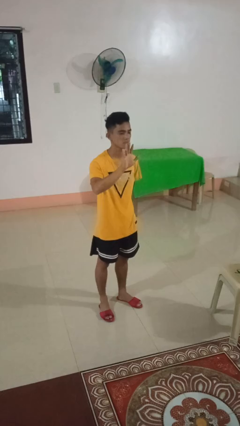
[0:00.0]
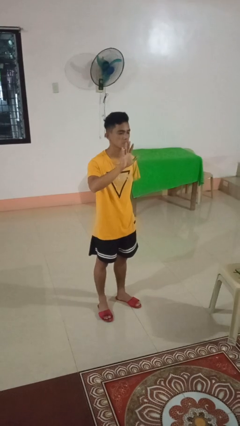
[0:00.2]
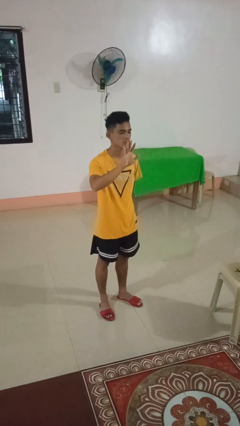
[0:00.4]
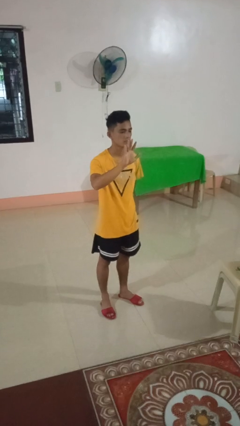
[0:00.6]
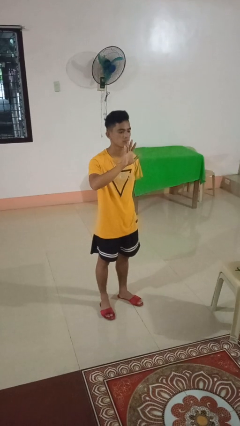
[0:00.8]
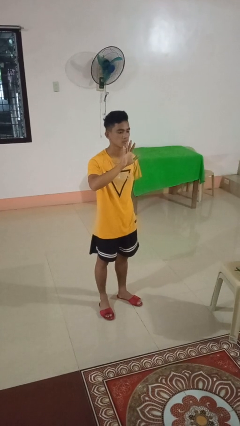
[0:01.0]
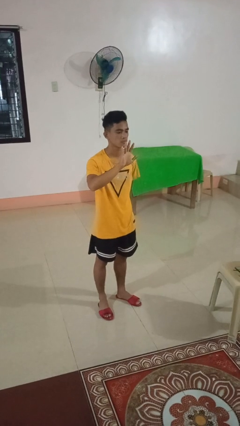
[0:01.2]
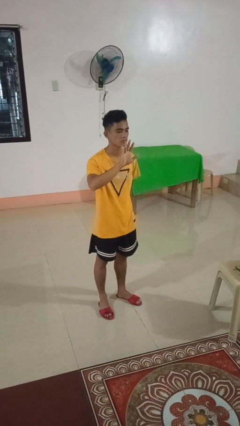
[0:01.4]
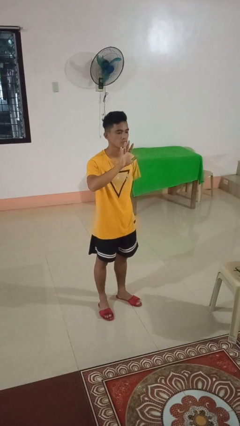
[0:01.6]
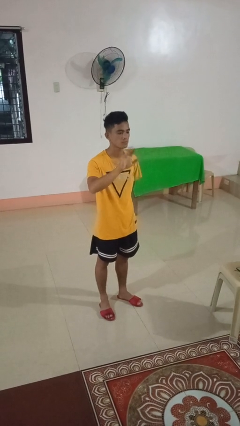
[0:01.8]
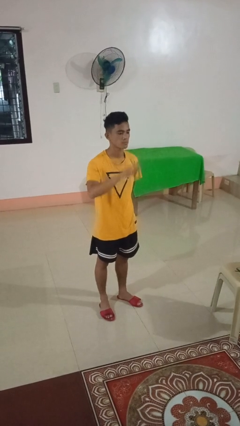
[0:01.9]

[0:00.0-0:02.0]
person gestures number five

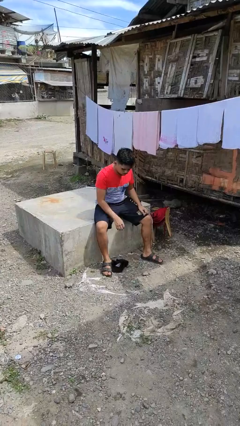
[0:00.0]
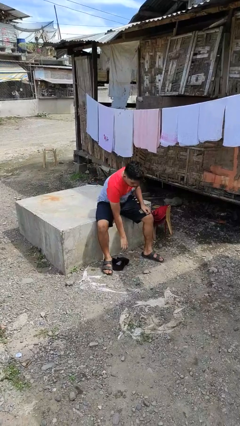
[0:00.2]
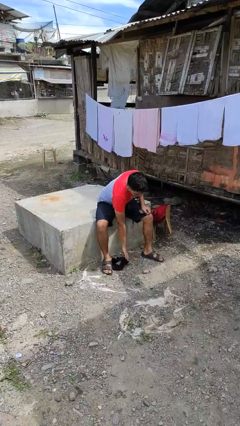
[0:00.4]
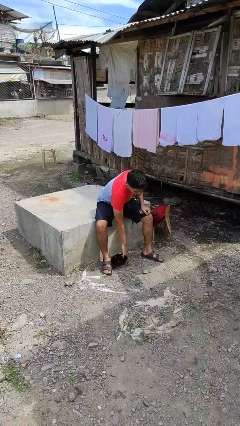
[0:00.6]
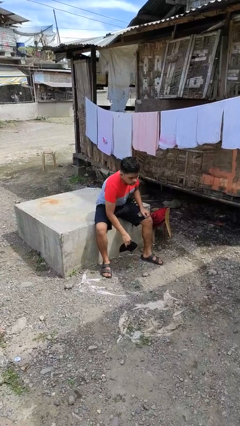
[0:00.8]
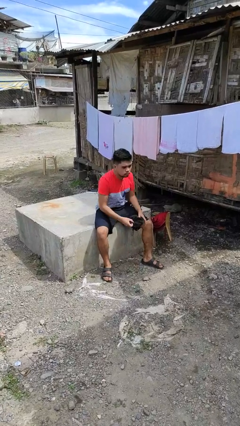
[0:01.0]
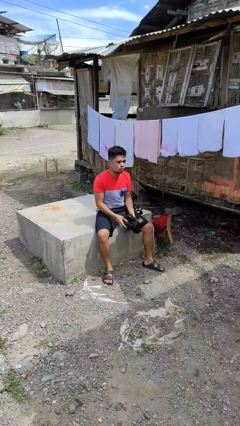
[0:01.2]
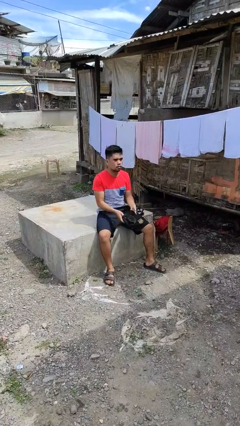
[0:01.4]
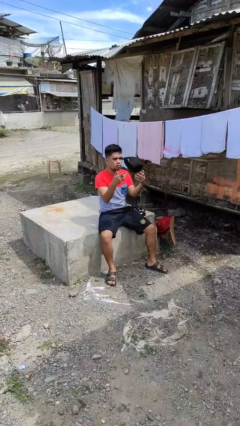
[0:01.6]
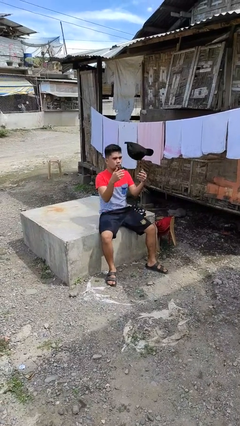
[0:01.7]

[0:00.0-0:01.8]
person picks up object from floor

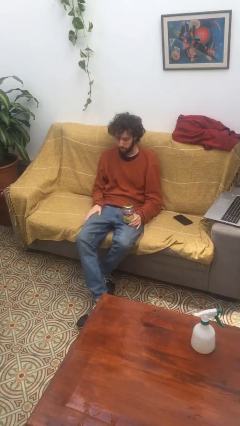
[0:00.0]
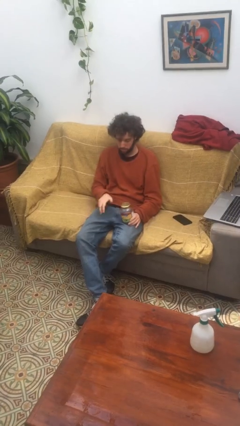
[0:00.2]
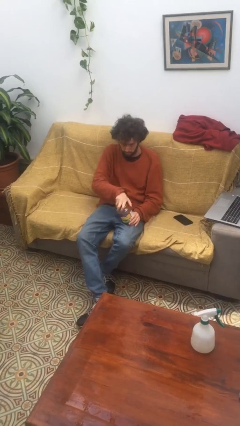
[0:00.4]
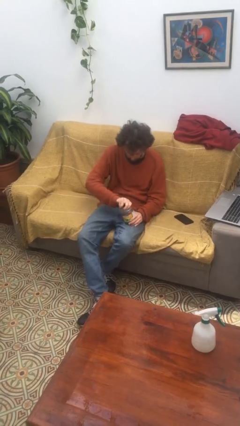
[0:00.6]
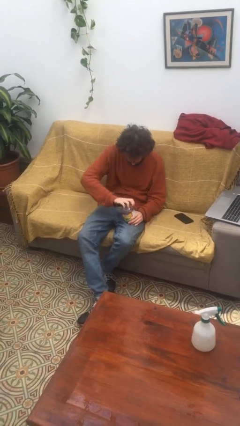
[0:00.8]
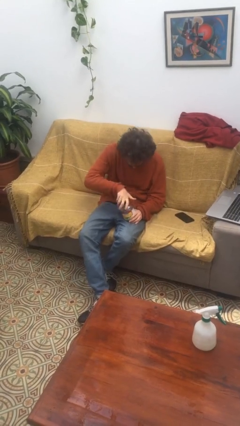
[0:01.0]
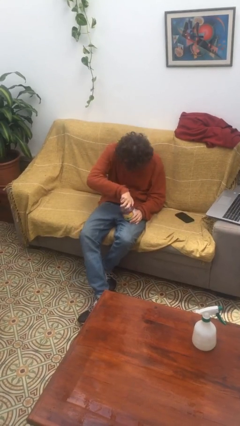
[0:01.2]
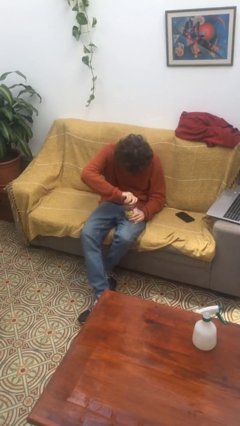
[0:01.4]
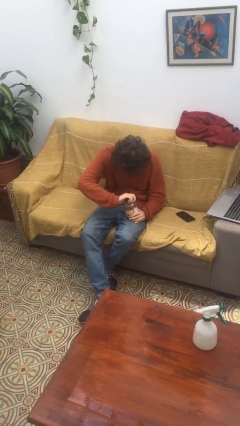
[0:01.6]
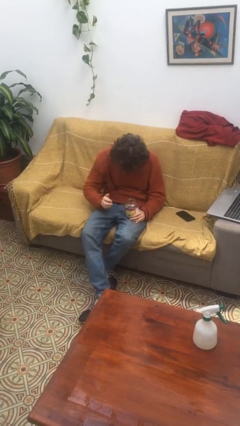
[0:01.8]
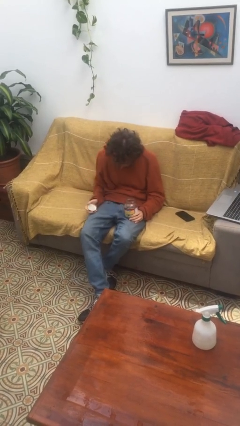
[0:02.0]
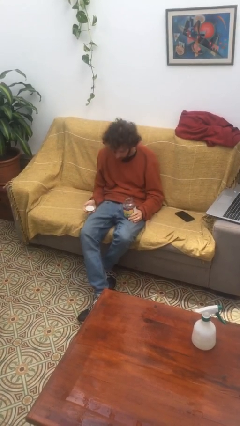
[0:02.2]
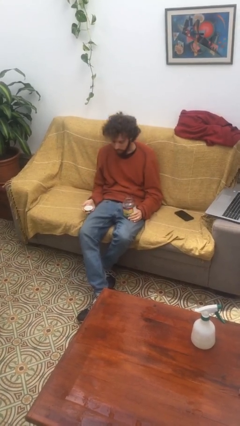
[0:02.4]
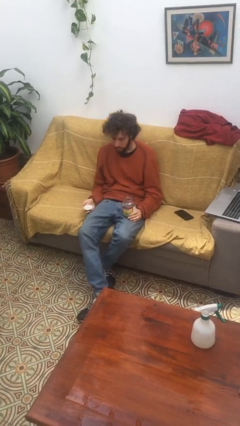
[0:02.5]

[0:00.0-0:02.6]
person opens jar

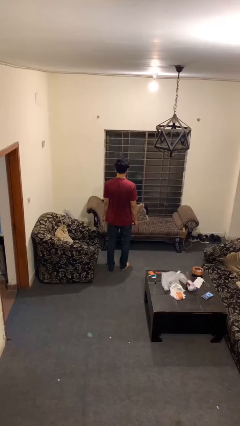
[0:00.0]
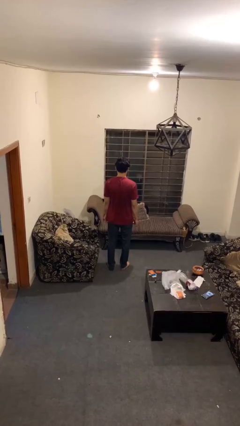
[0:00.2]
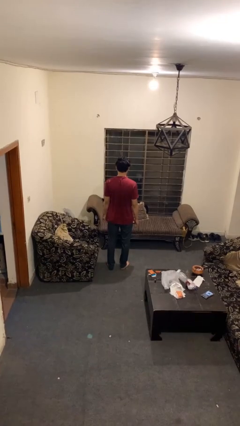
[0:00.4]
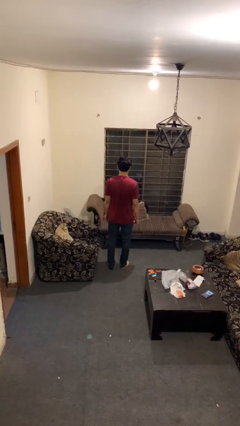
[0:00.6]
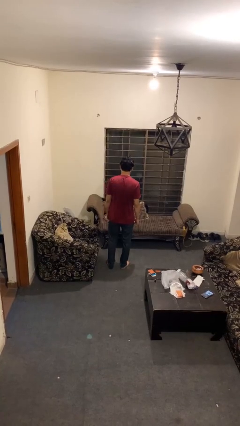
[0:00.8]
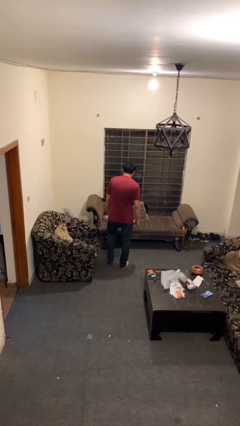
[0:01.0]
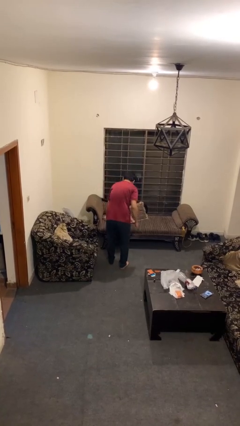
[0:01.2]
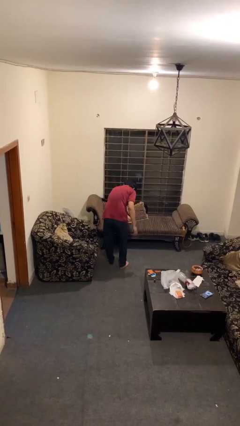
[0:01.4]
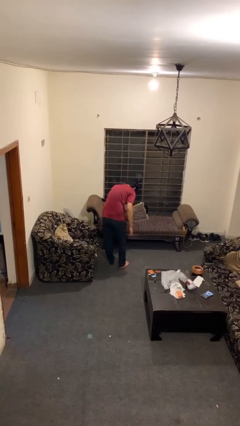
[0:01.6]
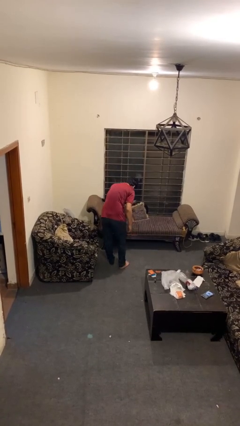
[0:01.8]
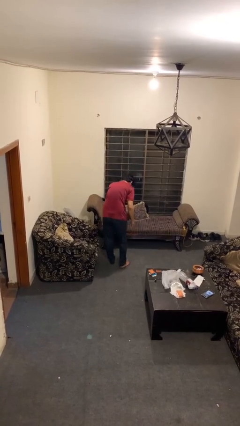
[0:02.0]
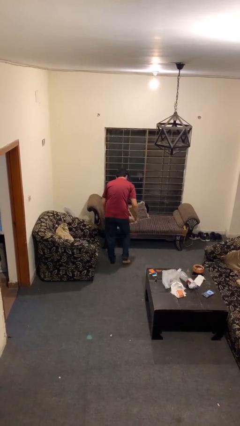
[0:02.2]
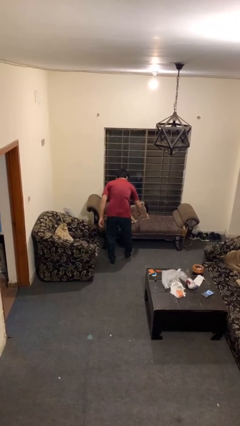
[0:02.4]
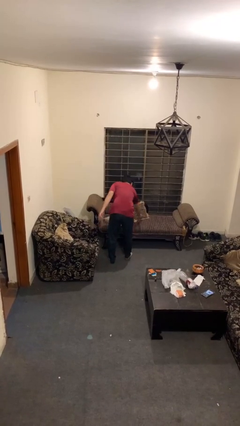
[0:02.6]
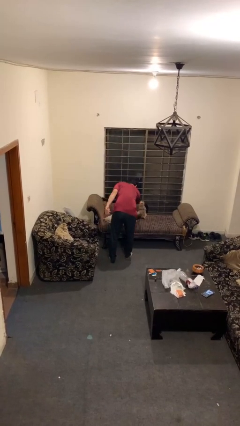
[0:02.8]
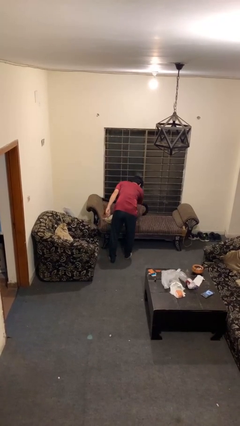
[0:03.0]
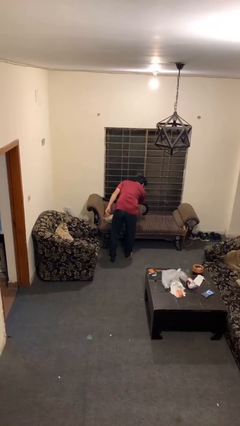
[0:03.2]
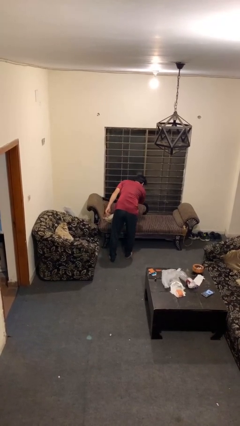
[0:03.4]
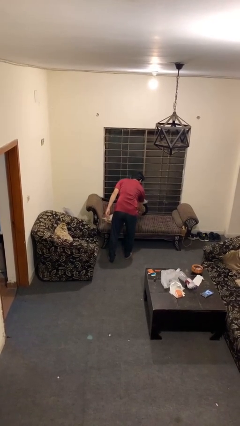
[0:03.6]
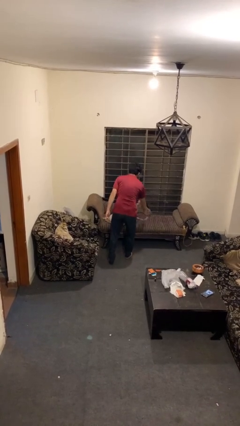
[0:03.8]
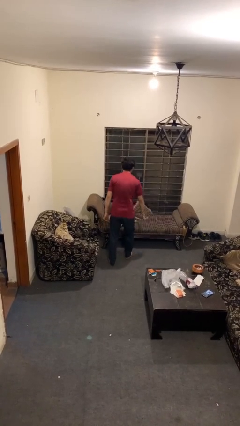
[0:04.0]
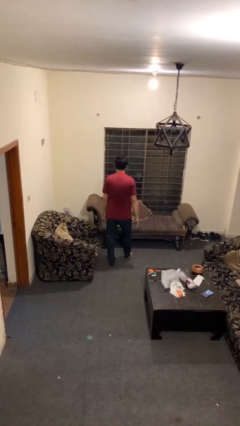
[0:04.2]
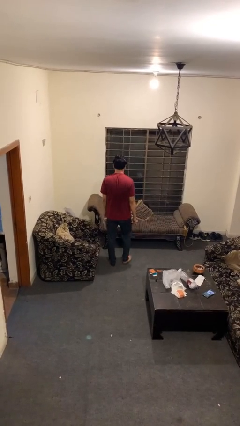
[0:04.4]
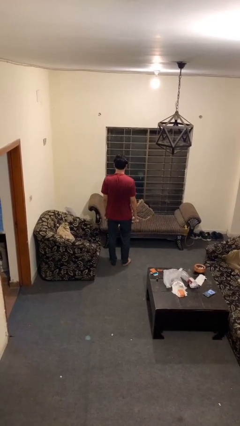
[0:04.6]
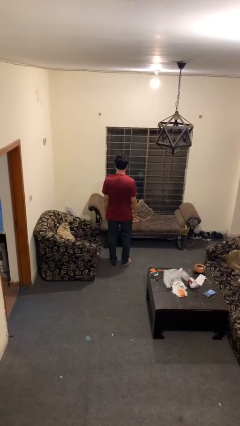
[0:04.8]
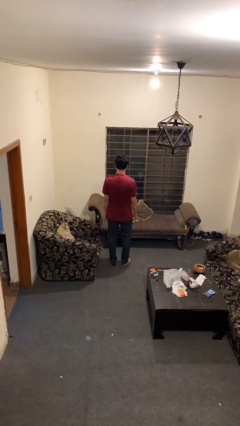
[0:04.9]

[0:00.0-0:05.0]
person searches in couch

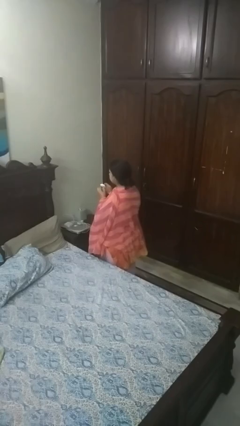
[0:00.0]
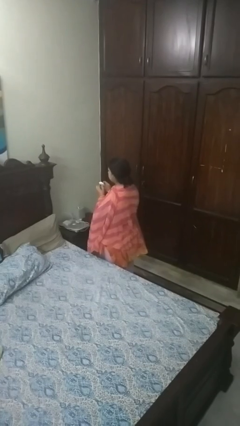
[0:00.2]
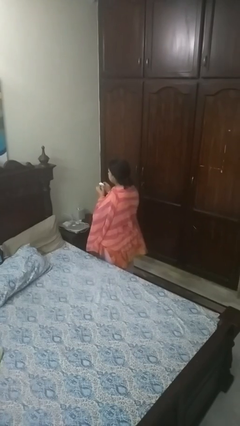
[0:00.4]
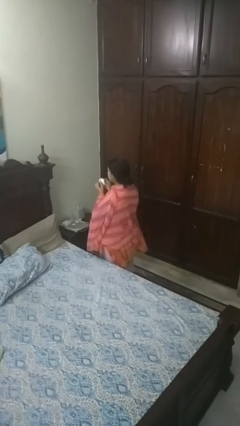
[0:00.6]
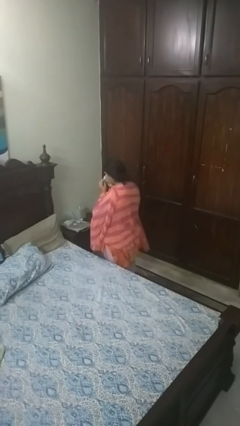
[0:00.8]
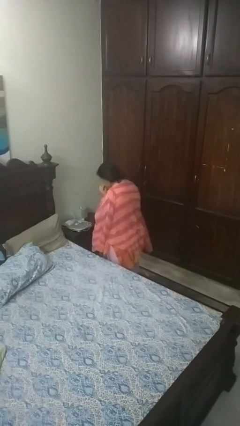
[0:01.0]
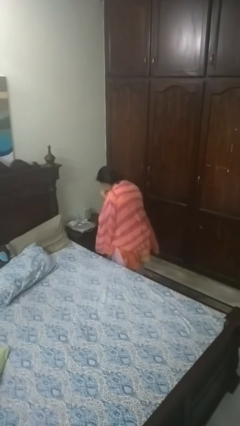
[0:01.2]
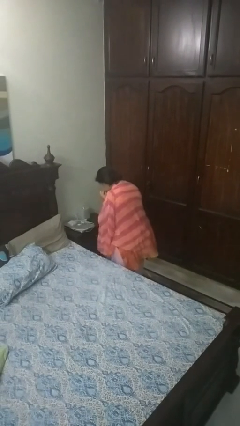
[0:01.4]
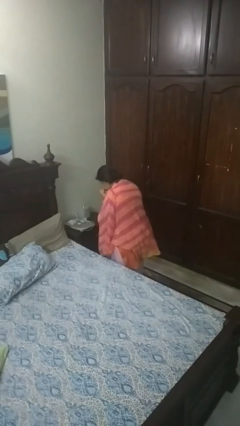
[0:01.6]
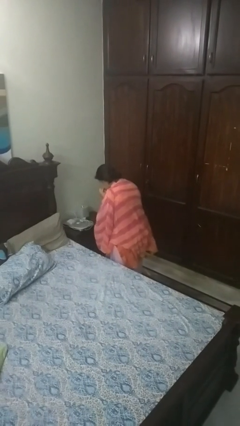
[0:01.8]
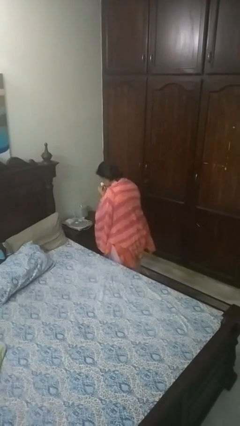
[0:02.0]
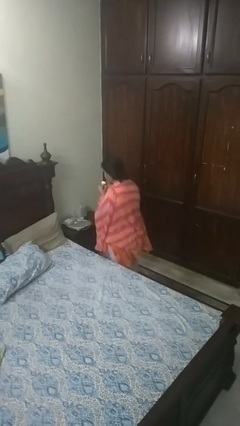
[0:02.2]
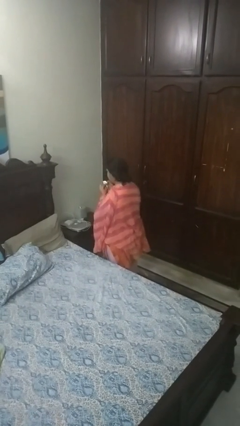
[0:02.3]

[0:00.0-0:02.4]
person blows nose

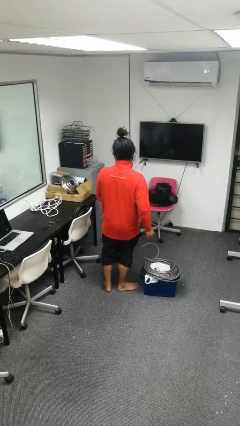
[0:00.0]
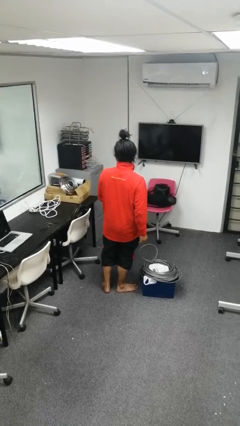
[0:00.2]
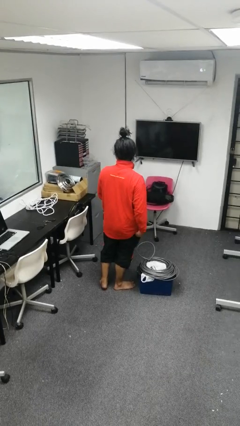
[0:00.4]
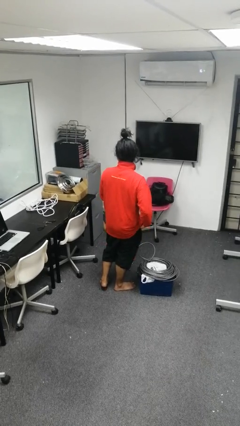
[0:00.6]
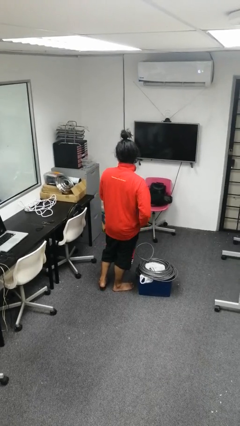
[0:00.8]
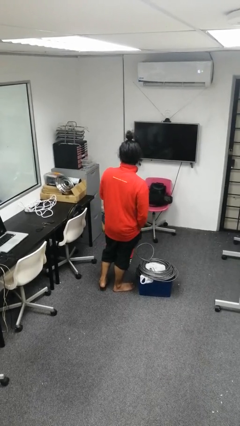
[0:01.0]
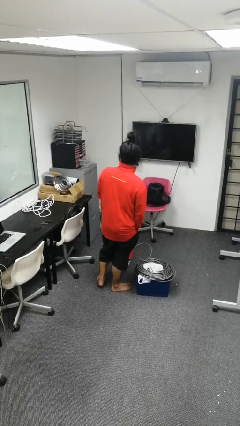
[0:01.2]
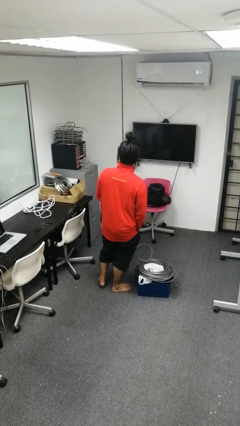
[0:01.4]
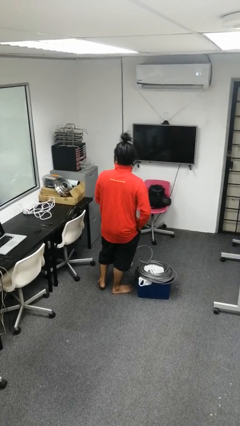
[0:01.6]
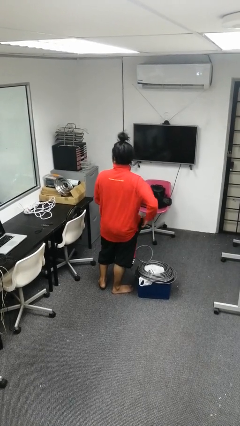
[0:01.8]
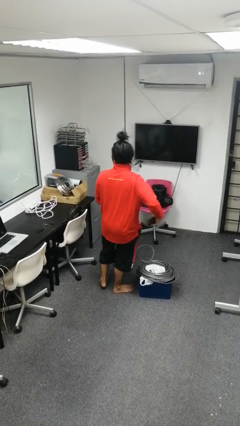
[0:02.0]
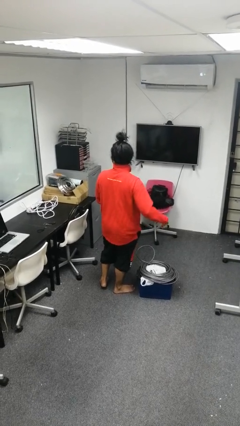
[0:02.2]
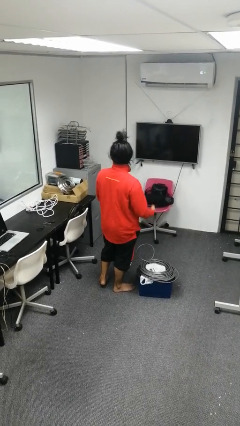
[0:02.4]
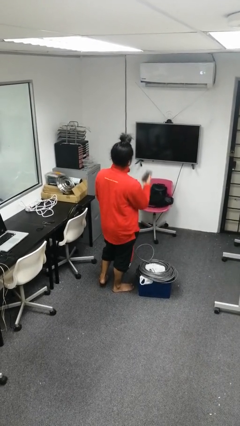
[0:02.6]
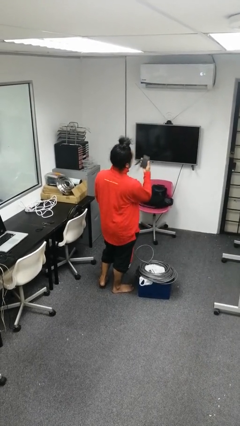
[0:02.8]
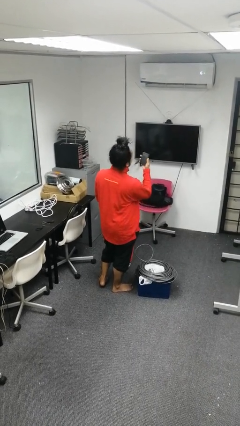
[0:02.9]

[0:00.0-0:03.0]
person takes phone from pocket

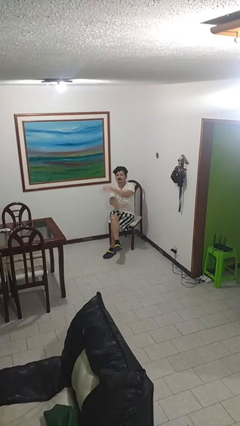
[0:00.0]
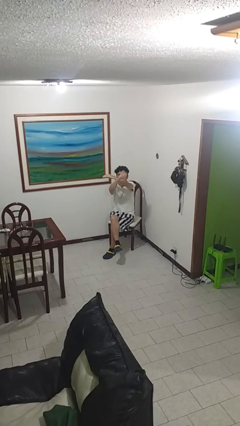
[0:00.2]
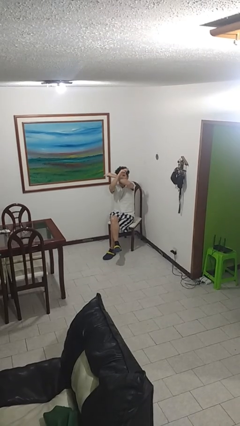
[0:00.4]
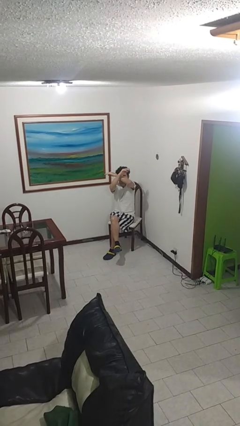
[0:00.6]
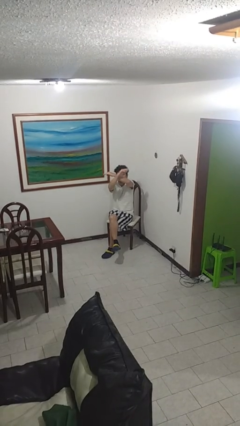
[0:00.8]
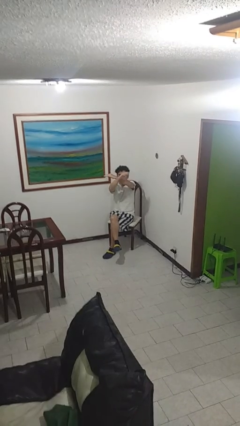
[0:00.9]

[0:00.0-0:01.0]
person gestures arms x
